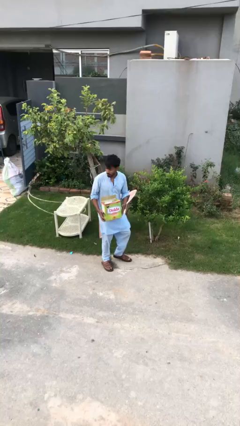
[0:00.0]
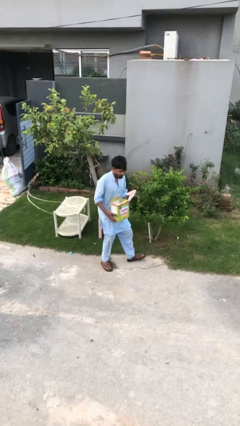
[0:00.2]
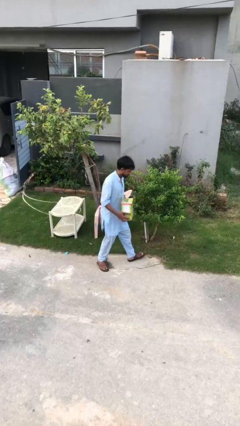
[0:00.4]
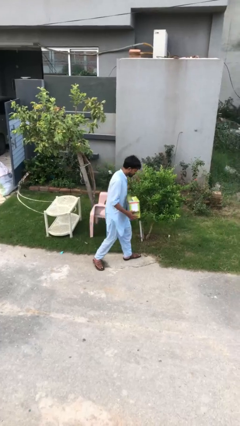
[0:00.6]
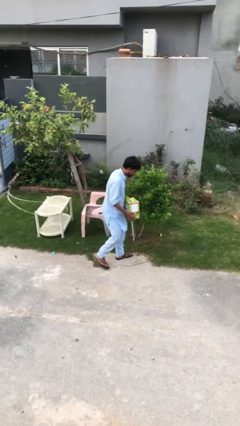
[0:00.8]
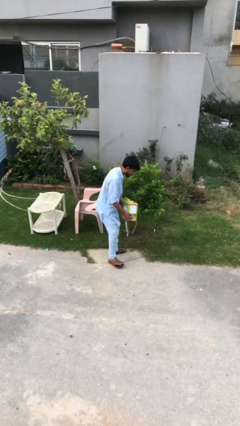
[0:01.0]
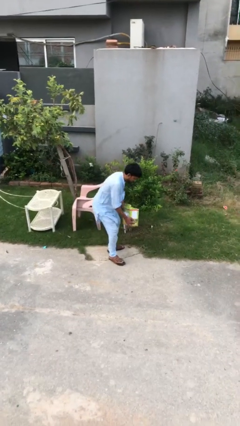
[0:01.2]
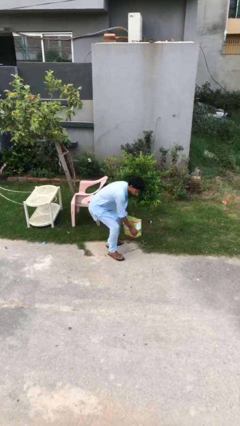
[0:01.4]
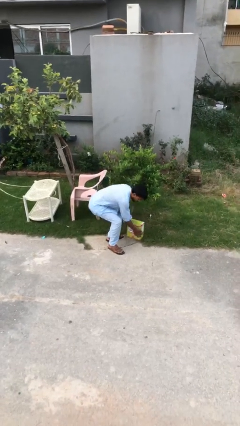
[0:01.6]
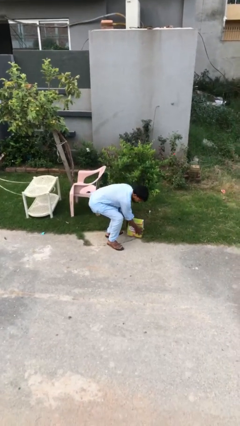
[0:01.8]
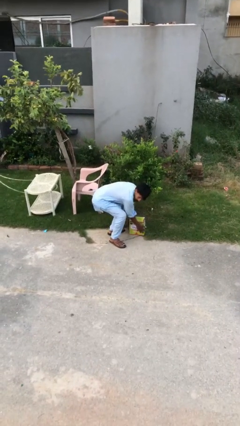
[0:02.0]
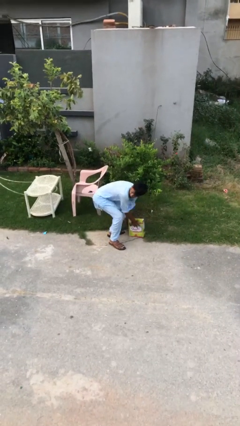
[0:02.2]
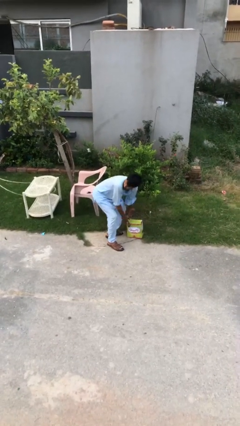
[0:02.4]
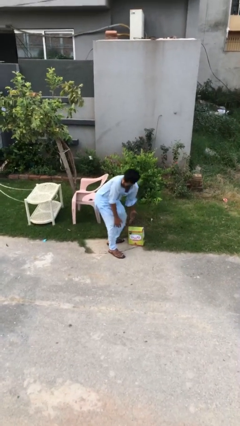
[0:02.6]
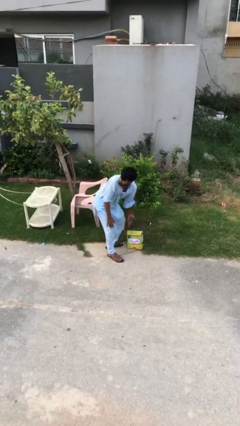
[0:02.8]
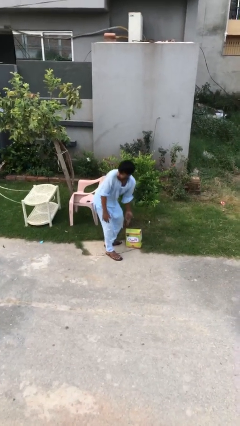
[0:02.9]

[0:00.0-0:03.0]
person puts down object on floor

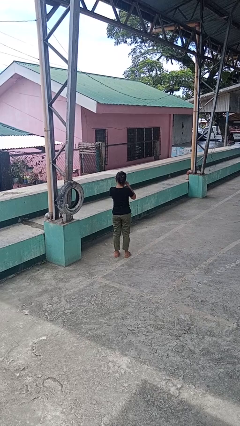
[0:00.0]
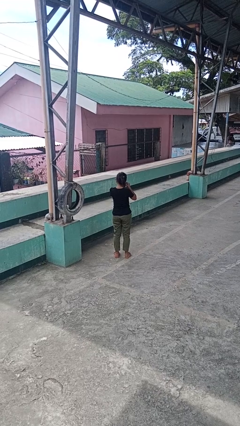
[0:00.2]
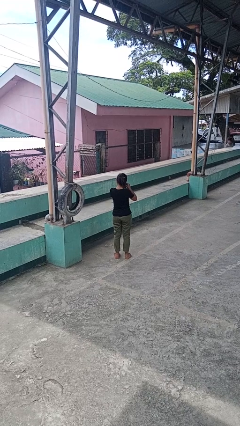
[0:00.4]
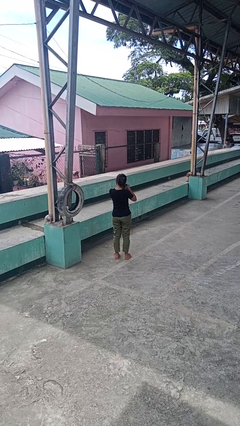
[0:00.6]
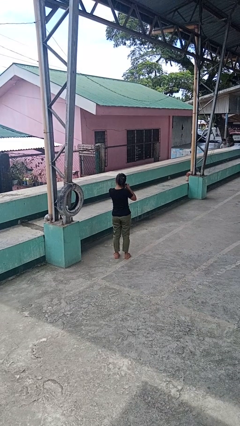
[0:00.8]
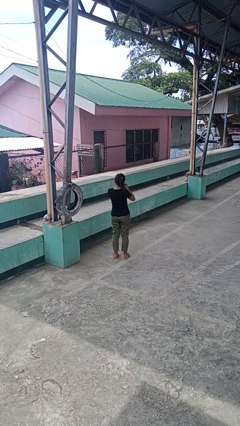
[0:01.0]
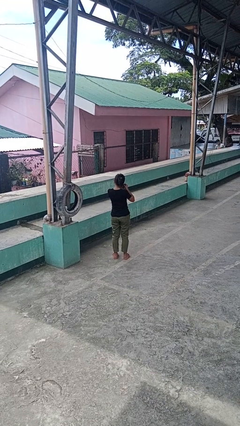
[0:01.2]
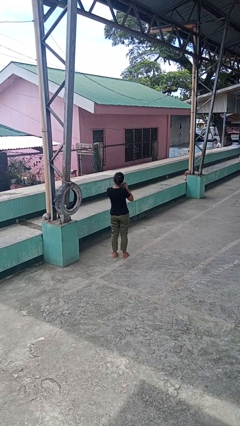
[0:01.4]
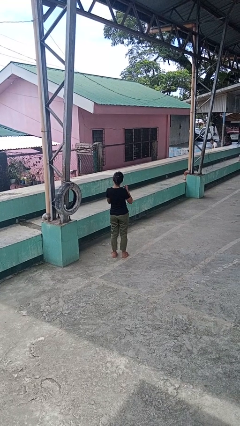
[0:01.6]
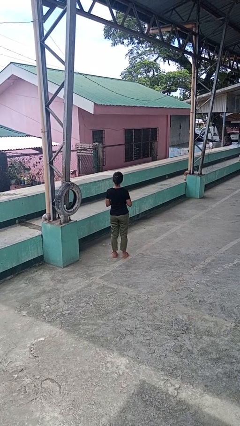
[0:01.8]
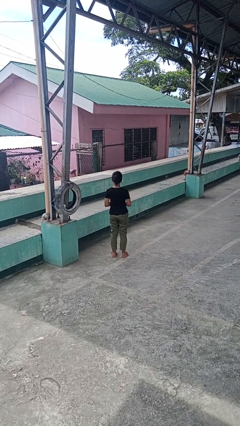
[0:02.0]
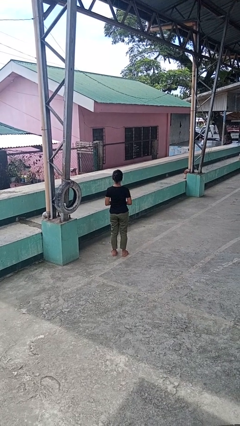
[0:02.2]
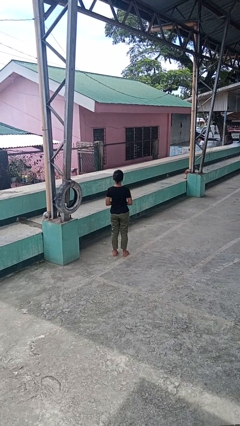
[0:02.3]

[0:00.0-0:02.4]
person takes off earrings

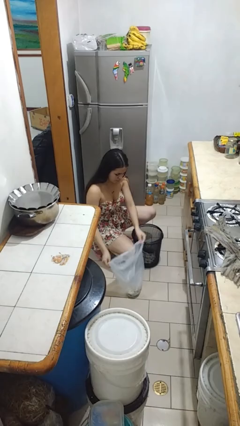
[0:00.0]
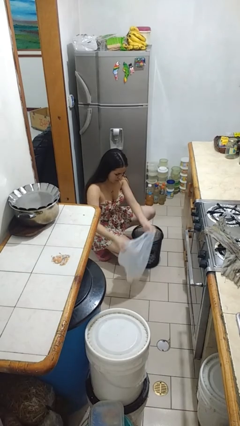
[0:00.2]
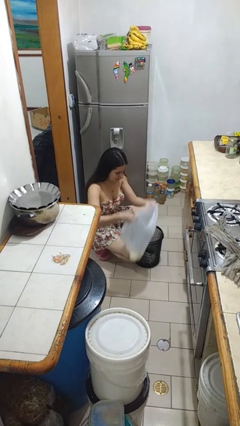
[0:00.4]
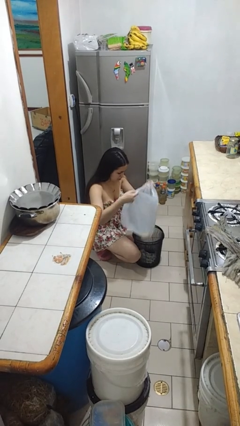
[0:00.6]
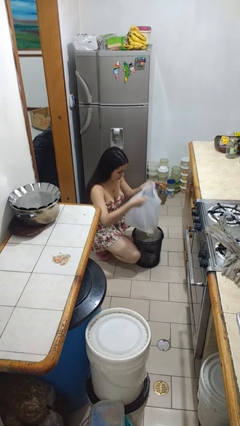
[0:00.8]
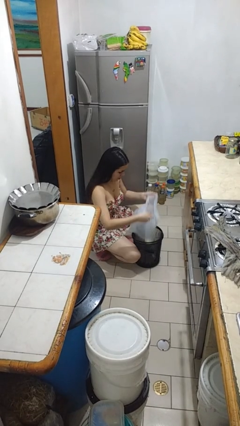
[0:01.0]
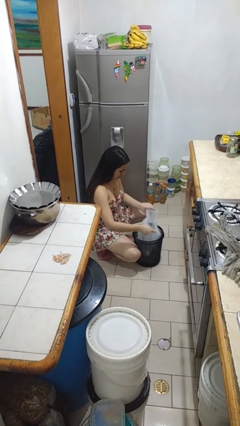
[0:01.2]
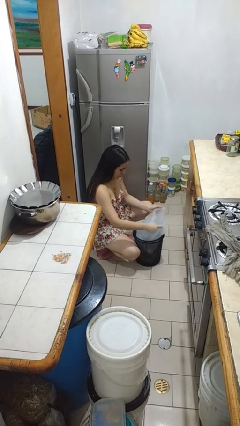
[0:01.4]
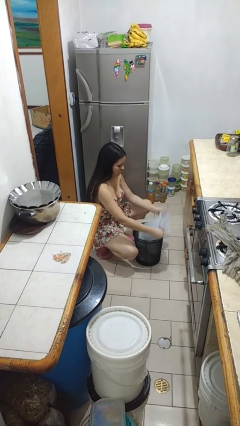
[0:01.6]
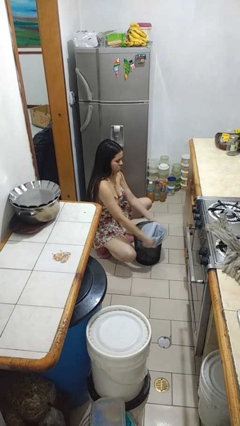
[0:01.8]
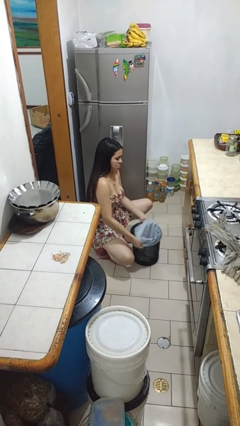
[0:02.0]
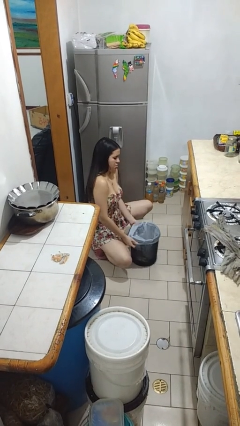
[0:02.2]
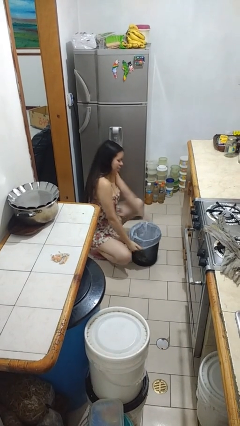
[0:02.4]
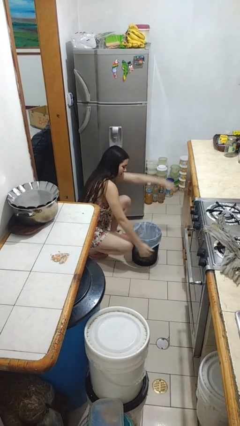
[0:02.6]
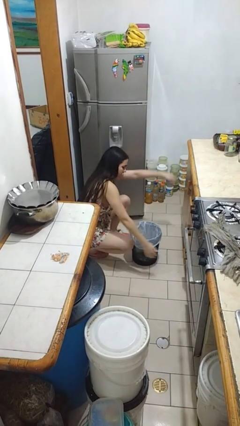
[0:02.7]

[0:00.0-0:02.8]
person inserts trashbag into trashcan

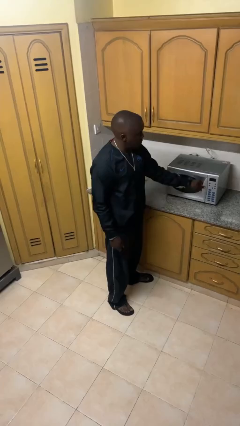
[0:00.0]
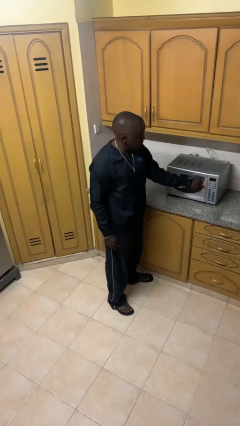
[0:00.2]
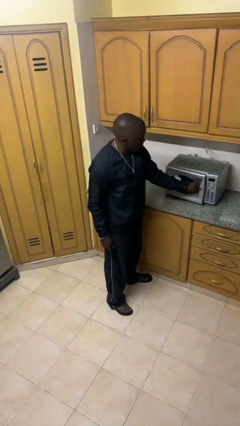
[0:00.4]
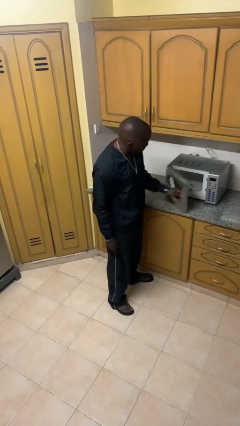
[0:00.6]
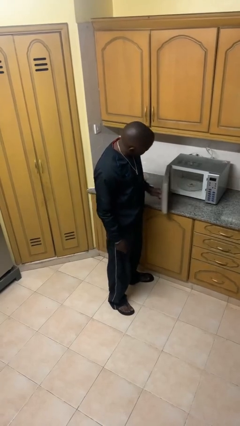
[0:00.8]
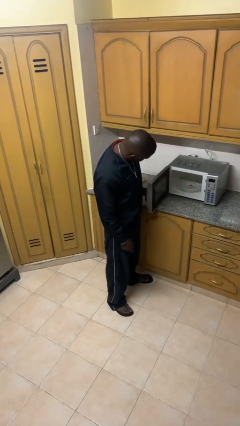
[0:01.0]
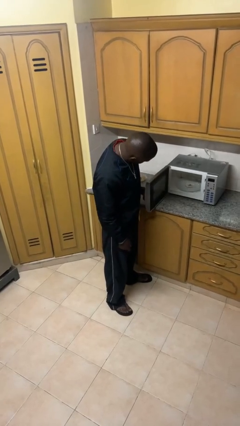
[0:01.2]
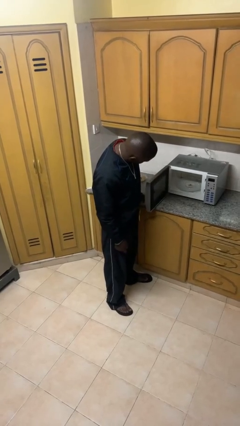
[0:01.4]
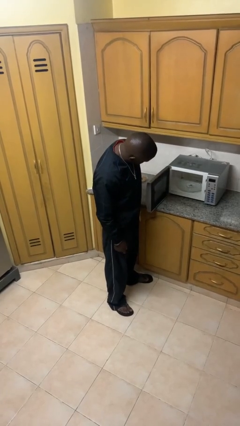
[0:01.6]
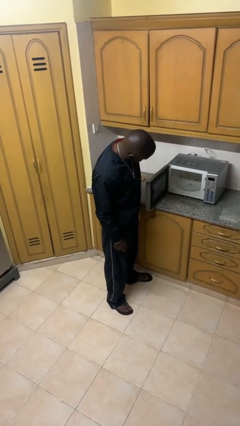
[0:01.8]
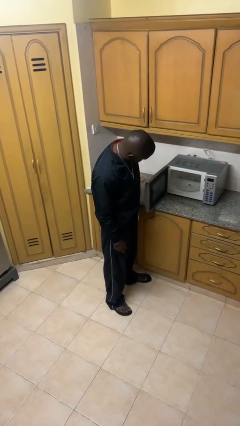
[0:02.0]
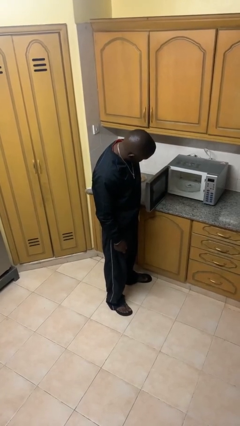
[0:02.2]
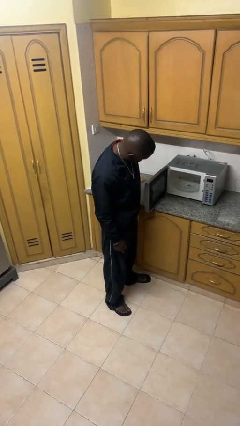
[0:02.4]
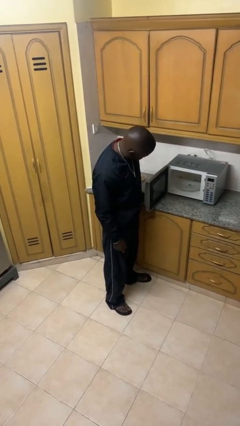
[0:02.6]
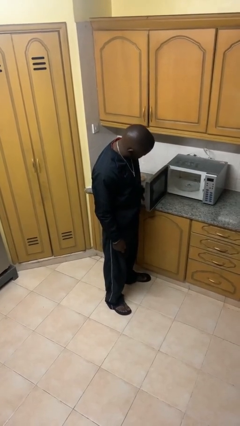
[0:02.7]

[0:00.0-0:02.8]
person opens microwave

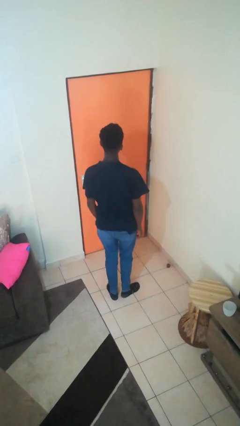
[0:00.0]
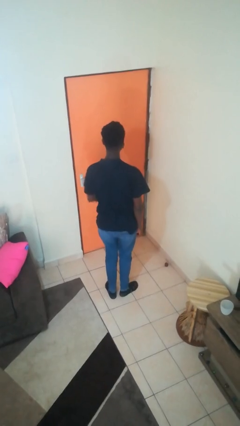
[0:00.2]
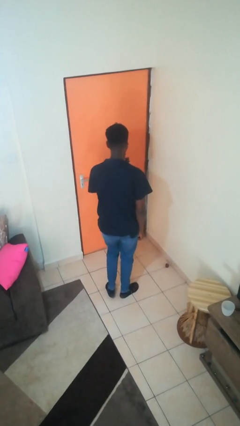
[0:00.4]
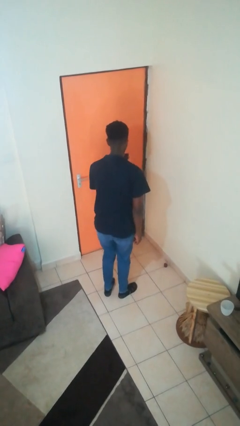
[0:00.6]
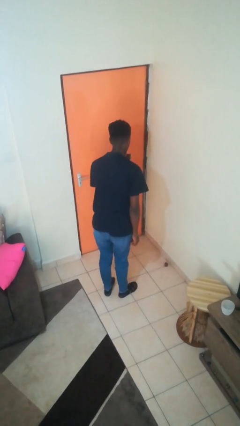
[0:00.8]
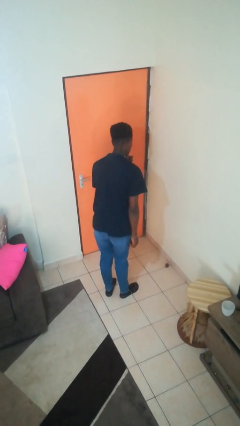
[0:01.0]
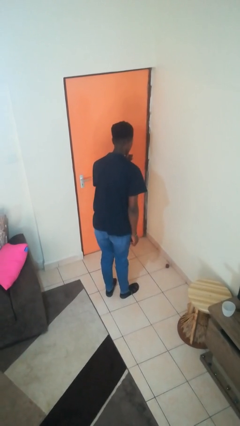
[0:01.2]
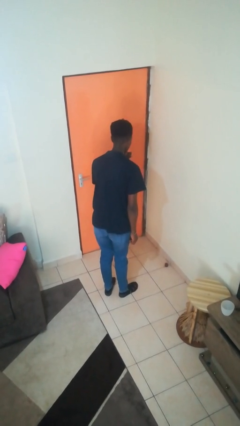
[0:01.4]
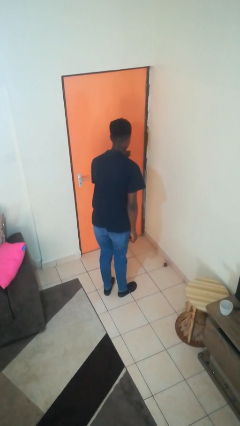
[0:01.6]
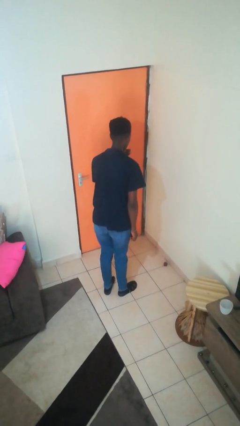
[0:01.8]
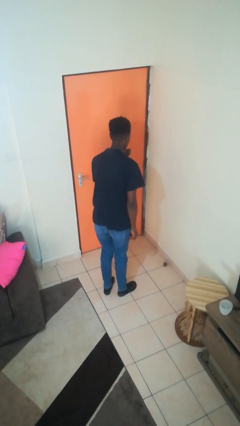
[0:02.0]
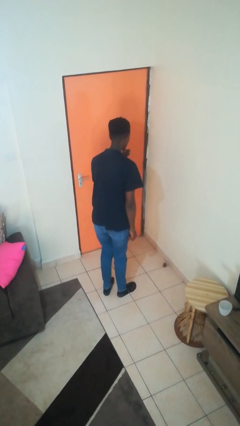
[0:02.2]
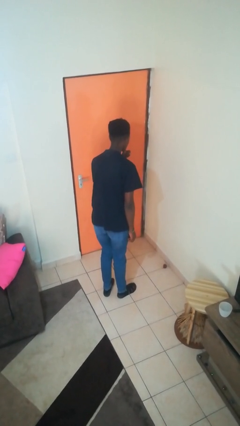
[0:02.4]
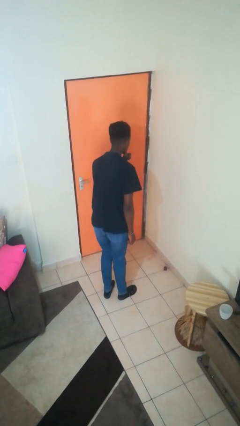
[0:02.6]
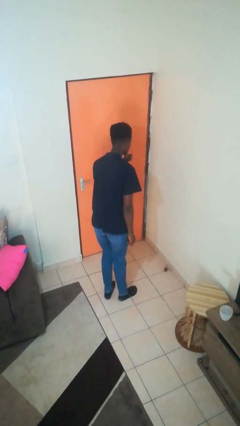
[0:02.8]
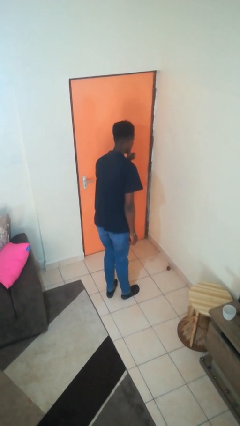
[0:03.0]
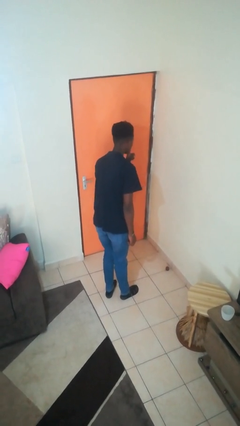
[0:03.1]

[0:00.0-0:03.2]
person gestures be quiet

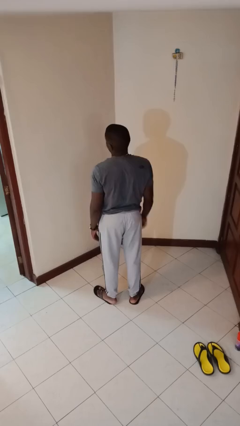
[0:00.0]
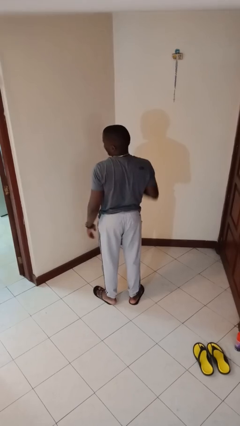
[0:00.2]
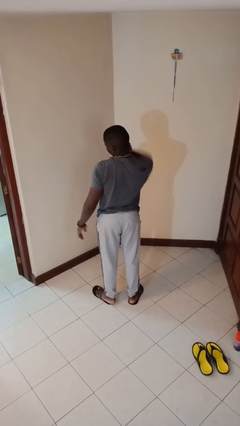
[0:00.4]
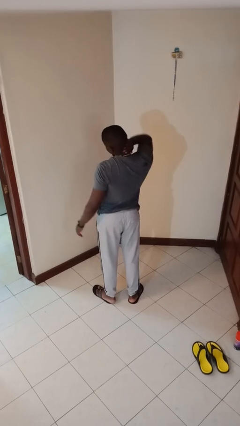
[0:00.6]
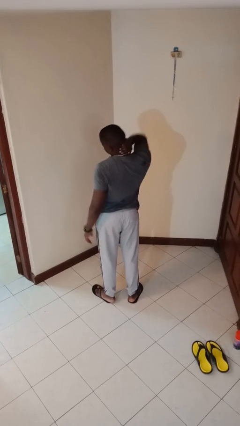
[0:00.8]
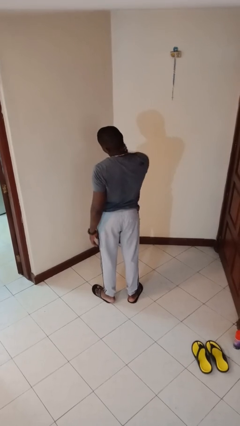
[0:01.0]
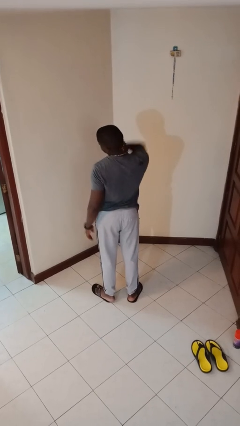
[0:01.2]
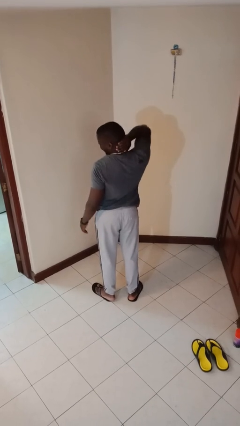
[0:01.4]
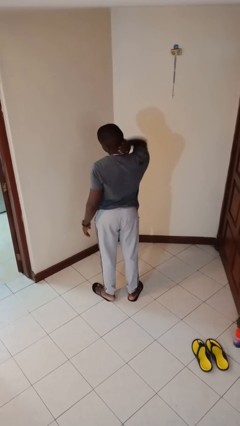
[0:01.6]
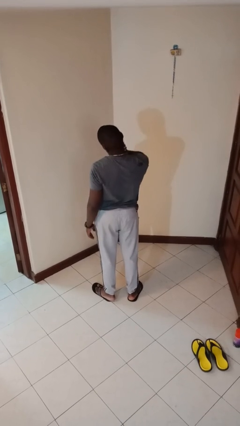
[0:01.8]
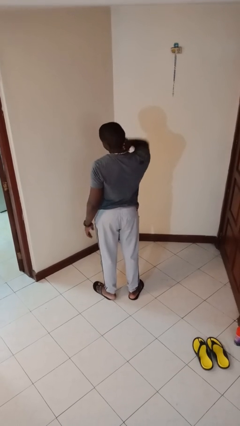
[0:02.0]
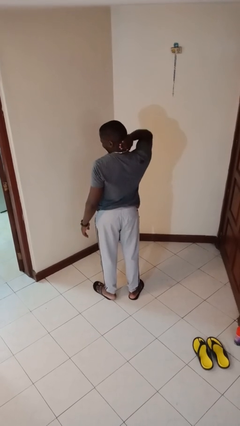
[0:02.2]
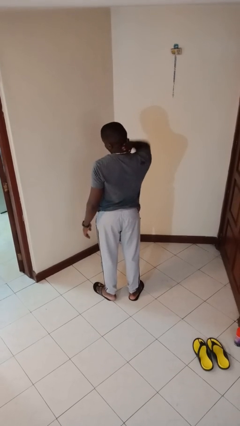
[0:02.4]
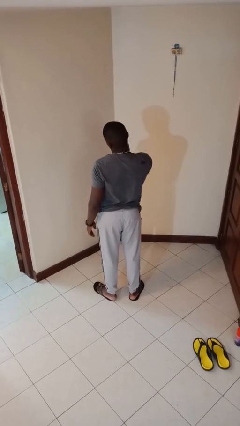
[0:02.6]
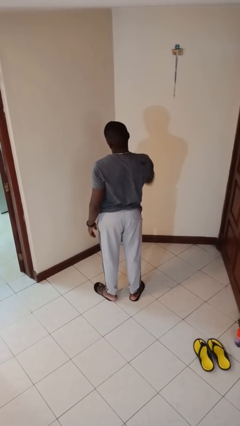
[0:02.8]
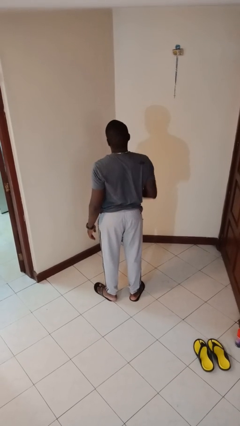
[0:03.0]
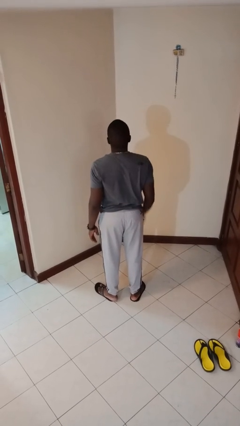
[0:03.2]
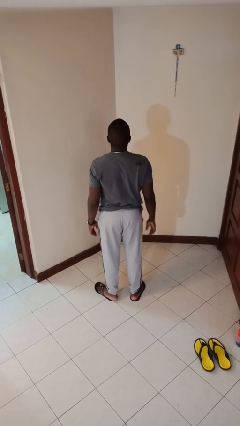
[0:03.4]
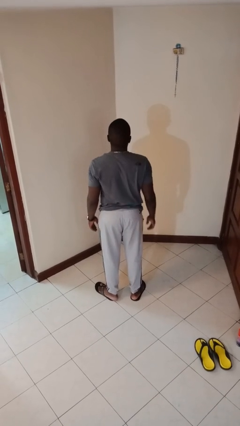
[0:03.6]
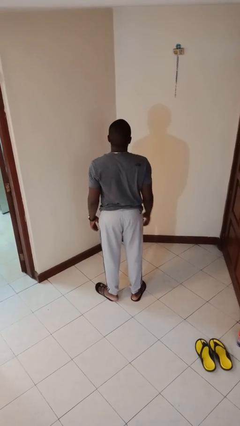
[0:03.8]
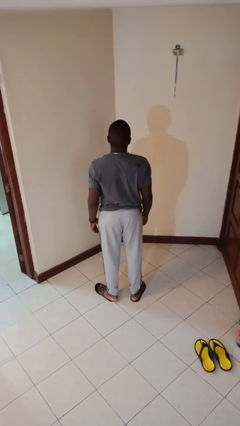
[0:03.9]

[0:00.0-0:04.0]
person rubs neck
